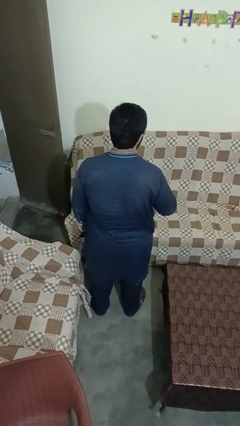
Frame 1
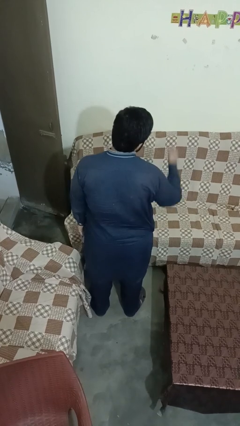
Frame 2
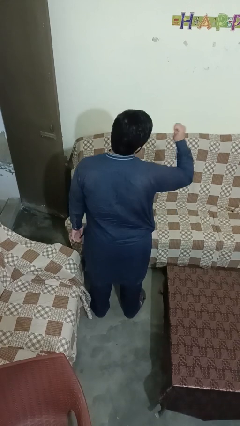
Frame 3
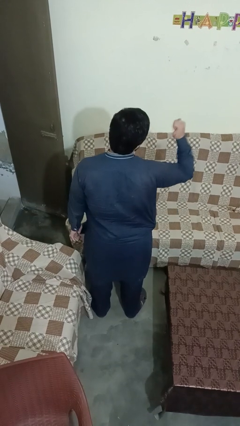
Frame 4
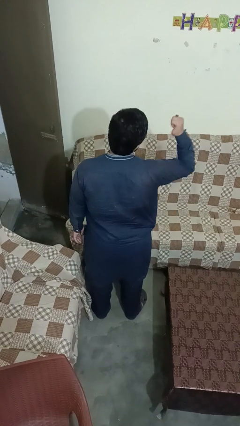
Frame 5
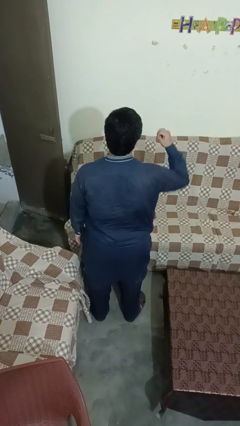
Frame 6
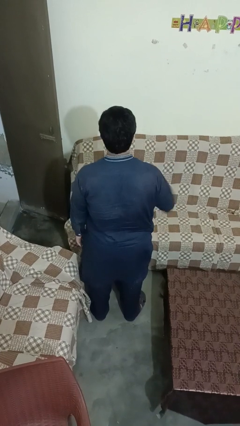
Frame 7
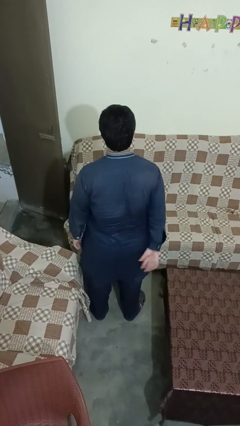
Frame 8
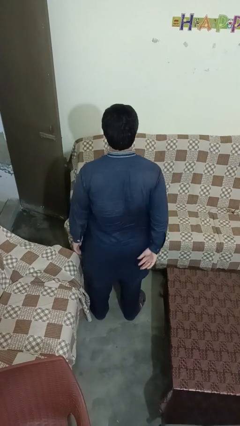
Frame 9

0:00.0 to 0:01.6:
person gestures behind me

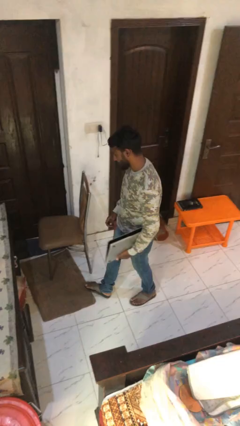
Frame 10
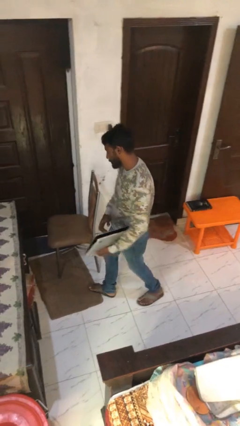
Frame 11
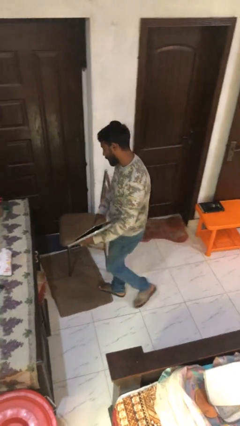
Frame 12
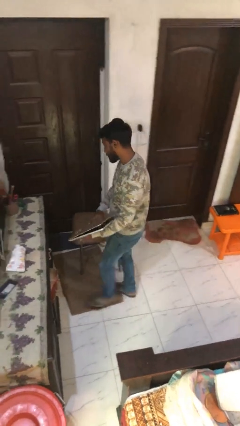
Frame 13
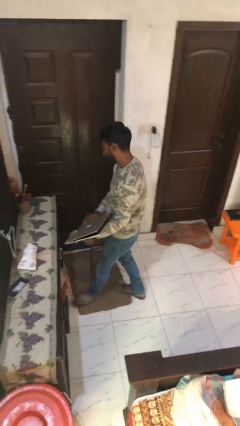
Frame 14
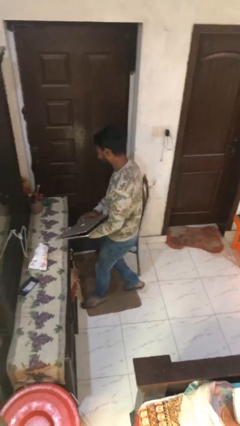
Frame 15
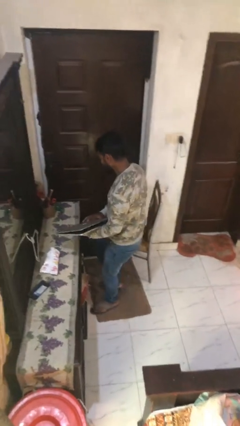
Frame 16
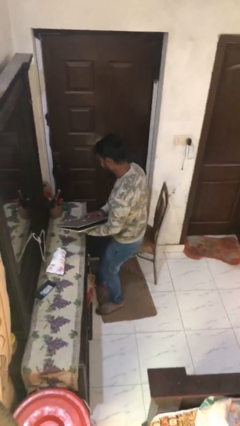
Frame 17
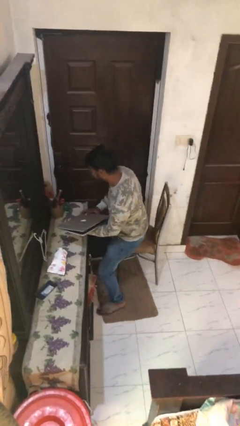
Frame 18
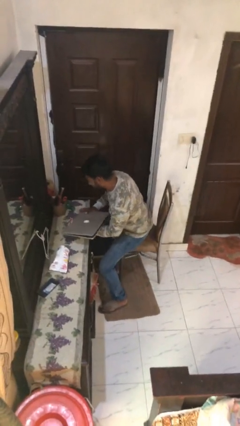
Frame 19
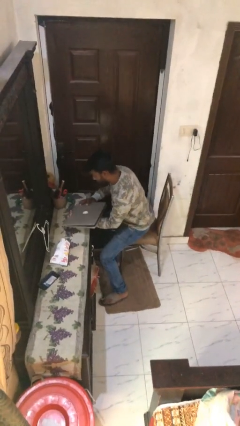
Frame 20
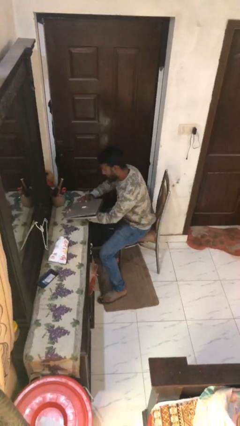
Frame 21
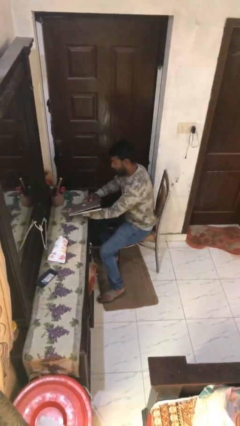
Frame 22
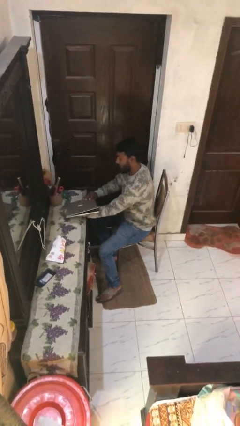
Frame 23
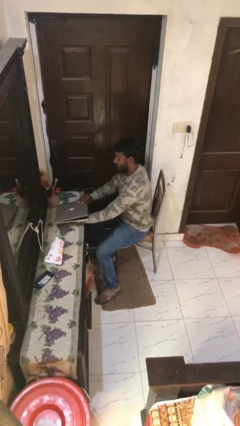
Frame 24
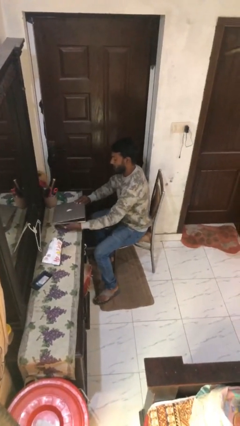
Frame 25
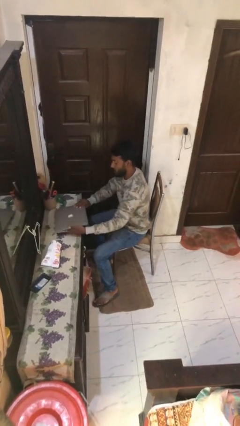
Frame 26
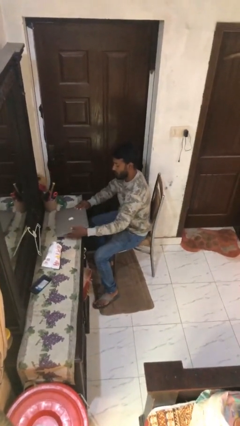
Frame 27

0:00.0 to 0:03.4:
person sits down

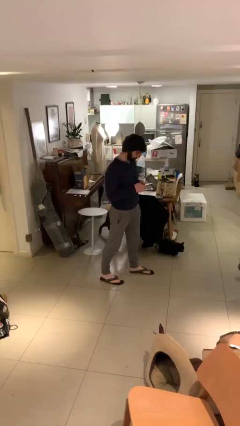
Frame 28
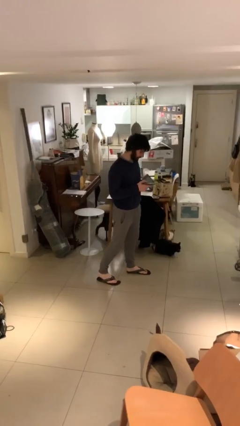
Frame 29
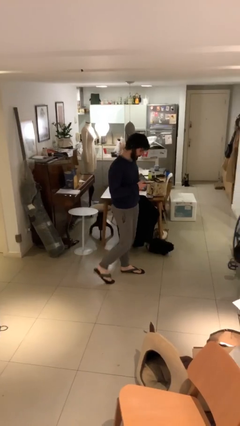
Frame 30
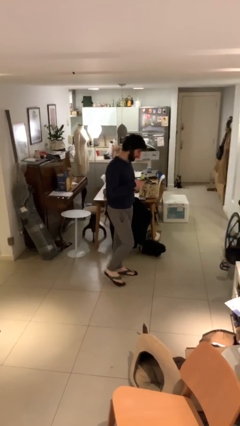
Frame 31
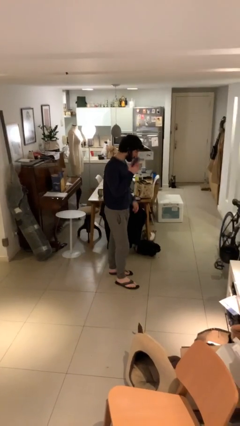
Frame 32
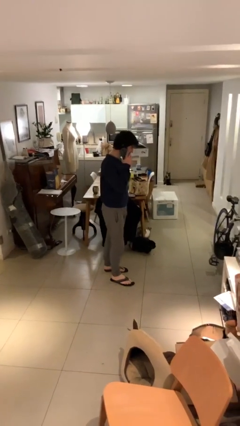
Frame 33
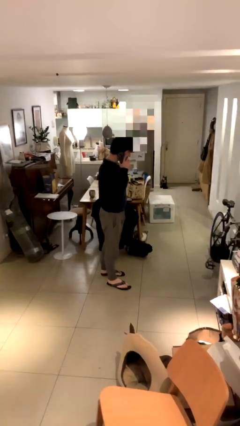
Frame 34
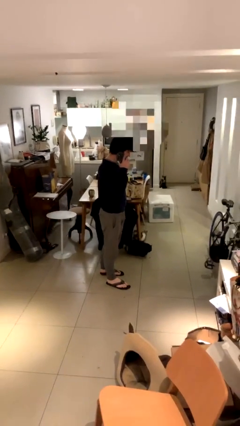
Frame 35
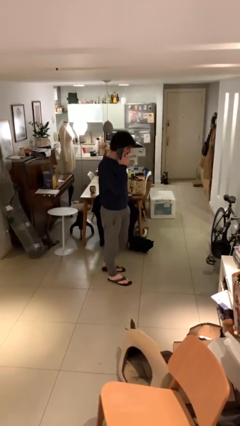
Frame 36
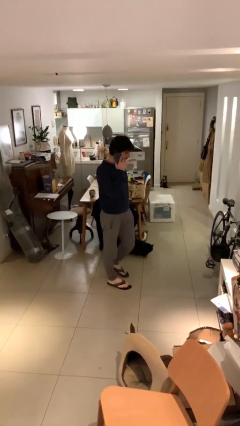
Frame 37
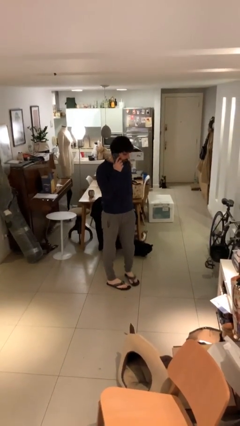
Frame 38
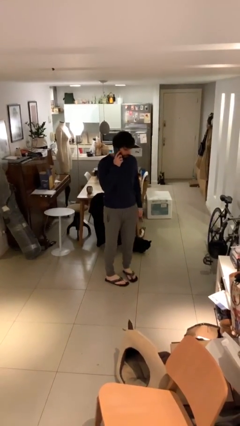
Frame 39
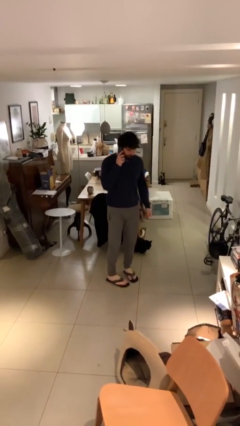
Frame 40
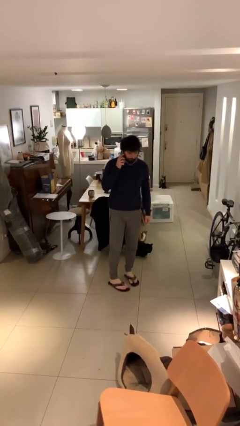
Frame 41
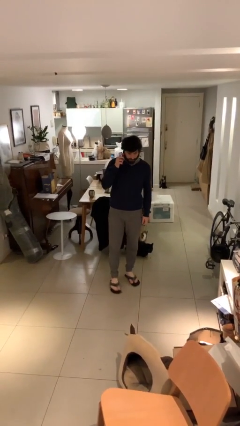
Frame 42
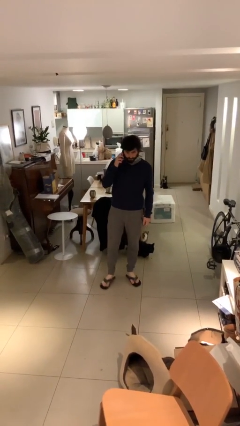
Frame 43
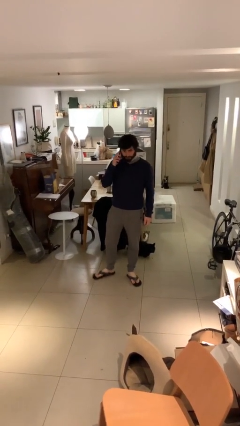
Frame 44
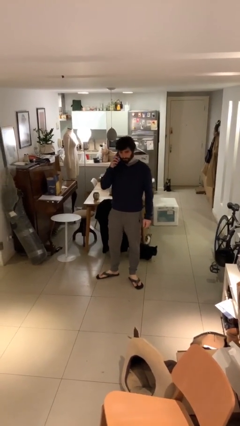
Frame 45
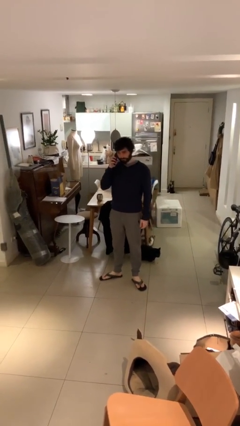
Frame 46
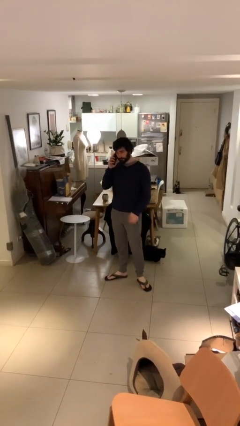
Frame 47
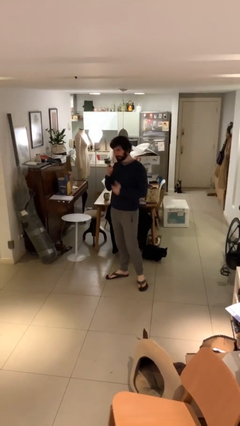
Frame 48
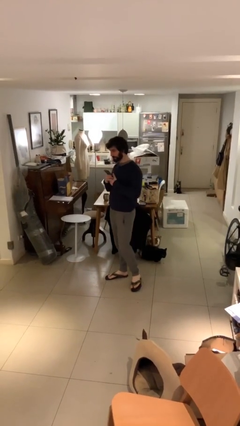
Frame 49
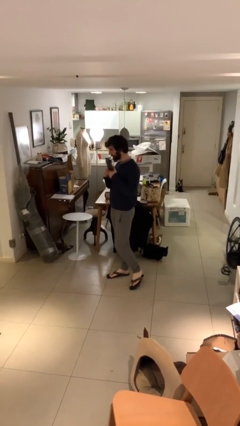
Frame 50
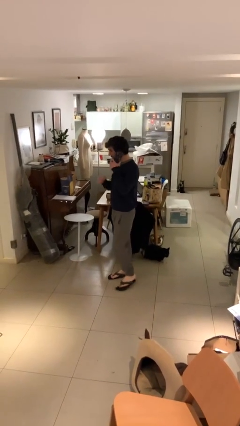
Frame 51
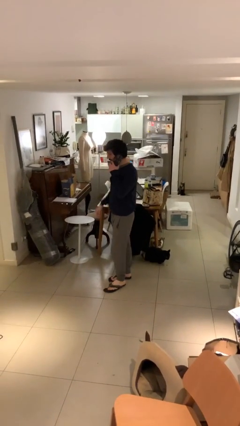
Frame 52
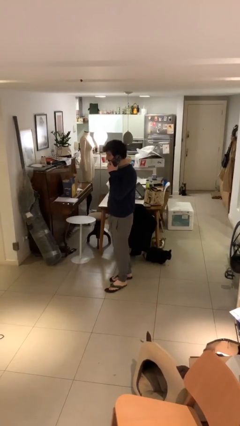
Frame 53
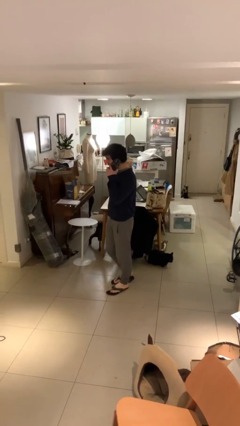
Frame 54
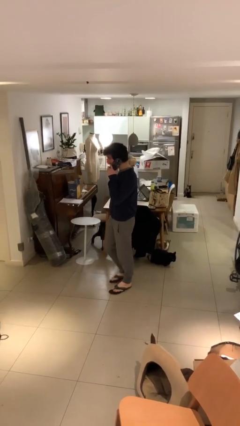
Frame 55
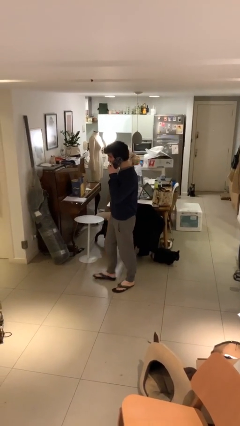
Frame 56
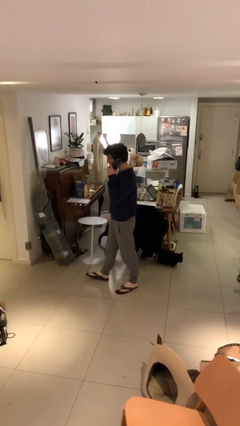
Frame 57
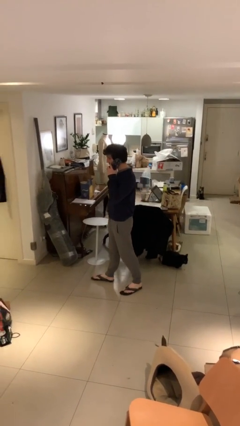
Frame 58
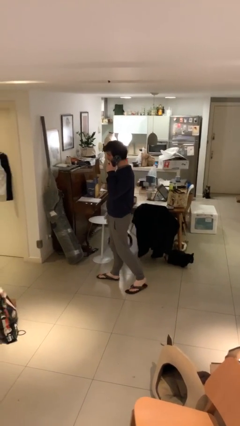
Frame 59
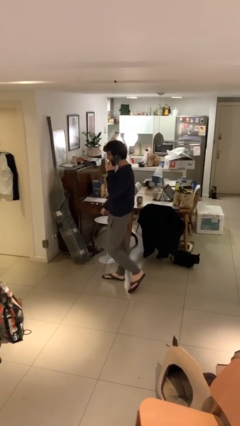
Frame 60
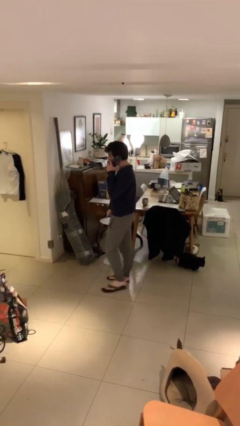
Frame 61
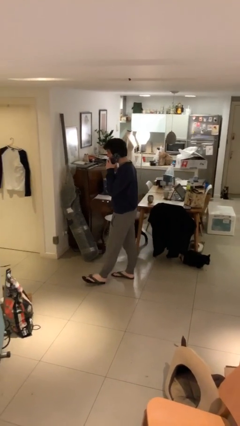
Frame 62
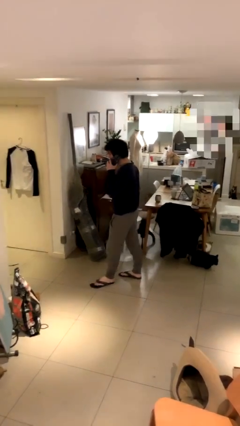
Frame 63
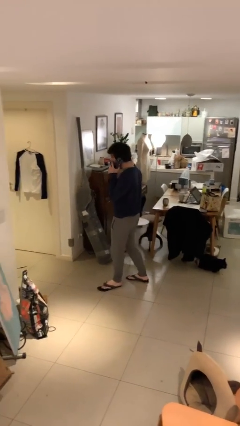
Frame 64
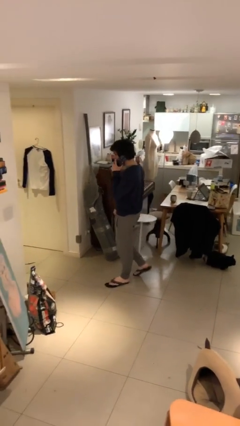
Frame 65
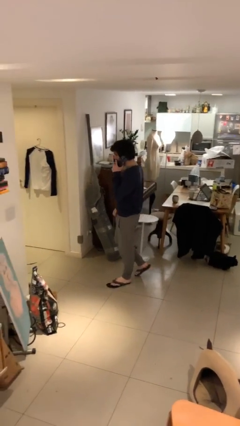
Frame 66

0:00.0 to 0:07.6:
person talks on phone

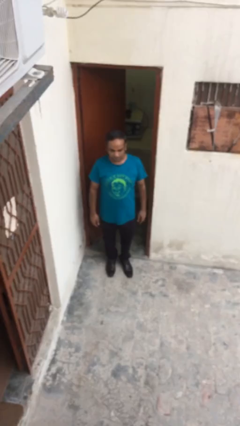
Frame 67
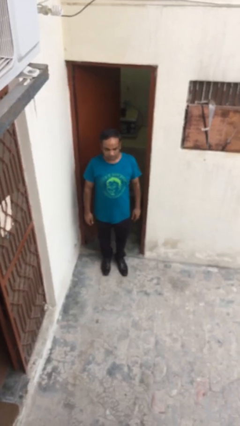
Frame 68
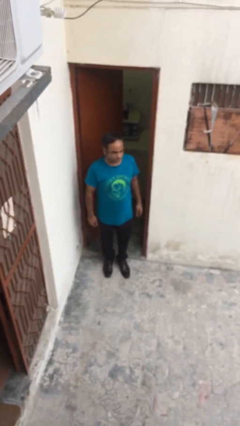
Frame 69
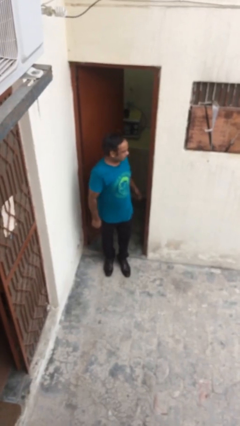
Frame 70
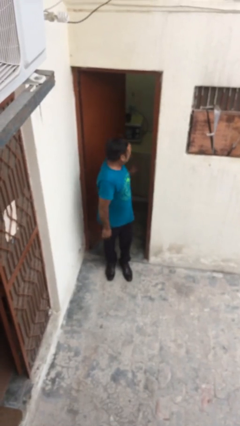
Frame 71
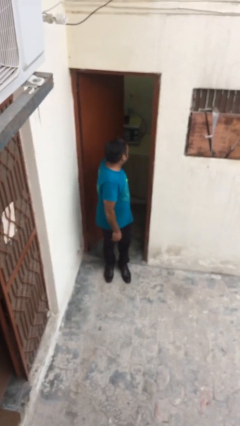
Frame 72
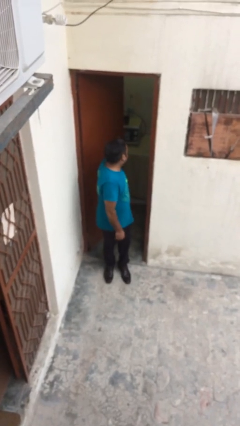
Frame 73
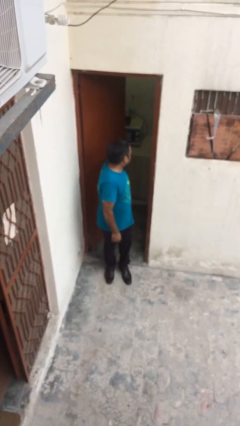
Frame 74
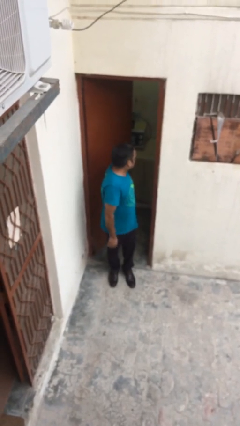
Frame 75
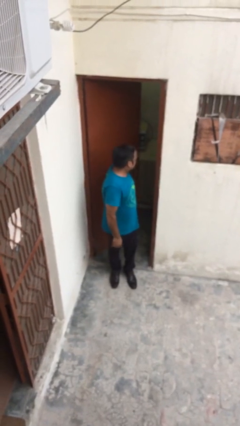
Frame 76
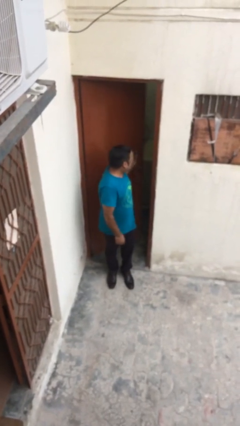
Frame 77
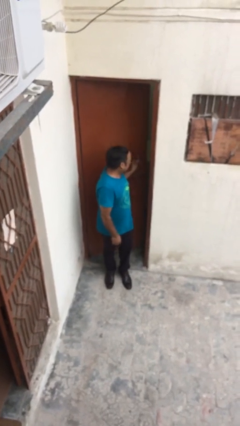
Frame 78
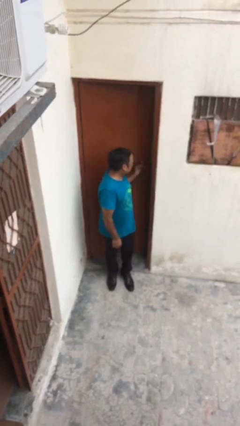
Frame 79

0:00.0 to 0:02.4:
person closes facility door

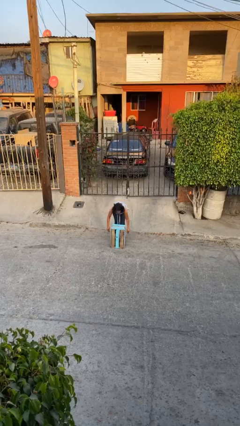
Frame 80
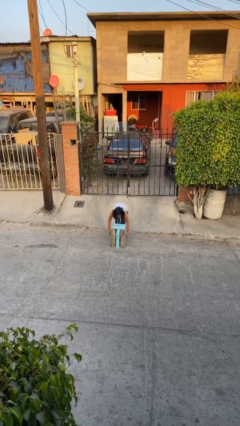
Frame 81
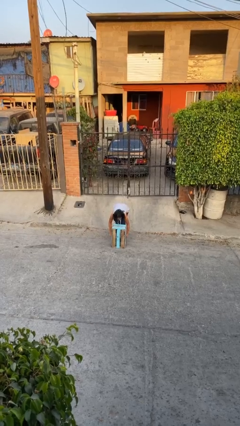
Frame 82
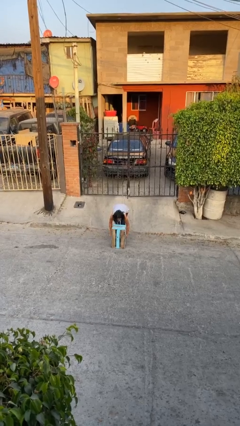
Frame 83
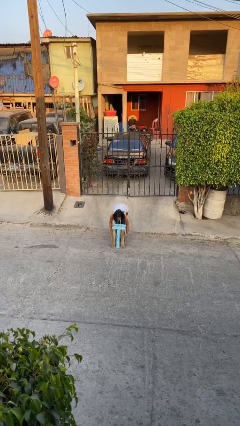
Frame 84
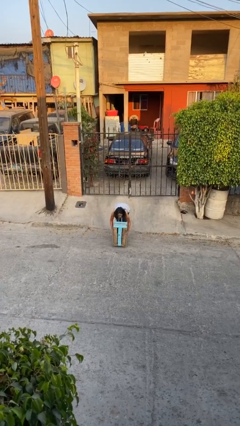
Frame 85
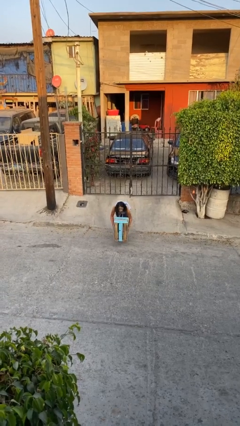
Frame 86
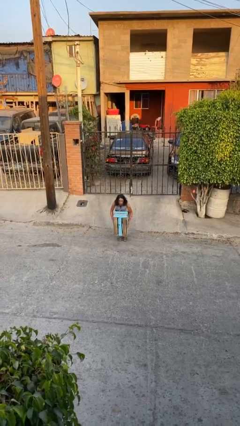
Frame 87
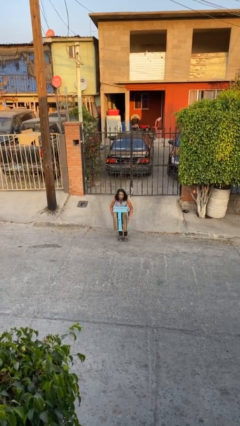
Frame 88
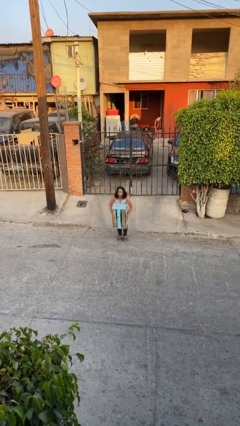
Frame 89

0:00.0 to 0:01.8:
person picks up object from floor

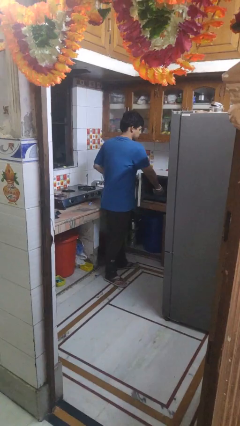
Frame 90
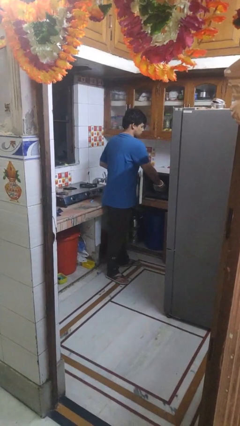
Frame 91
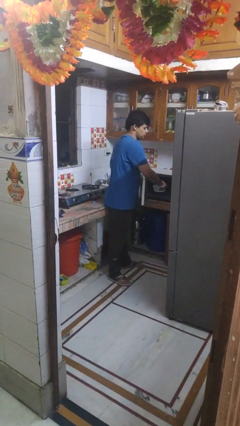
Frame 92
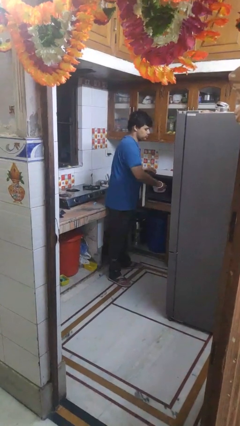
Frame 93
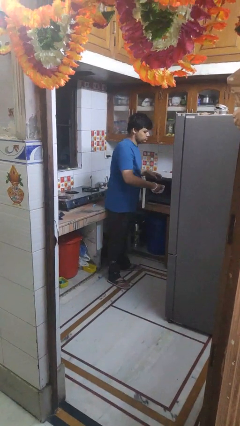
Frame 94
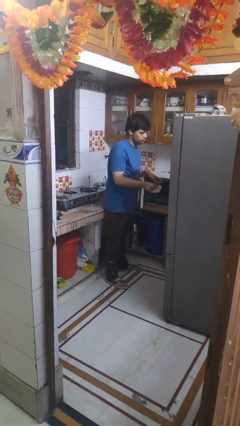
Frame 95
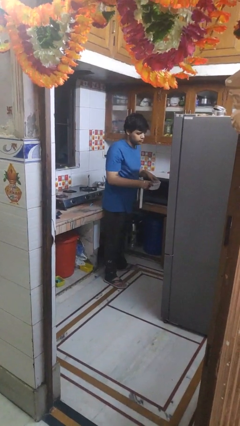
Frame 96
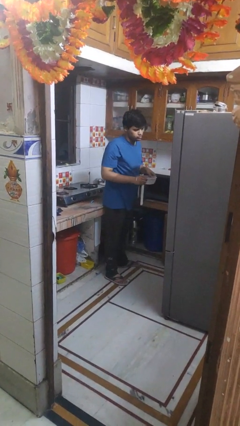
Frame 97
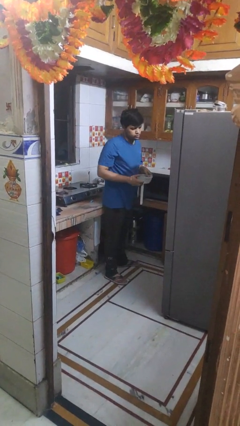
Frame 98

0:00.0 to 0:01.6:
person takes object from microwave
